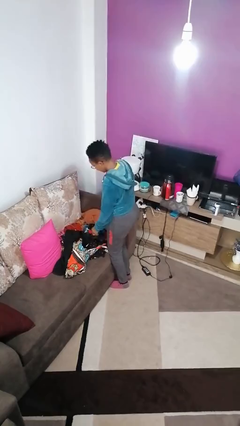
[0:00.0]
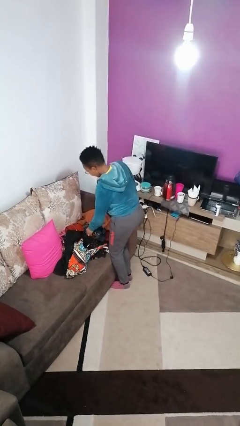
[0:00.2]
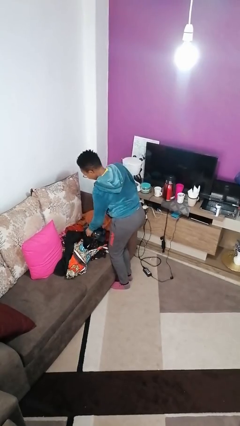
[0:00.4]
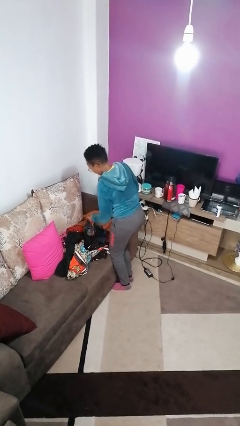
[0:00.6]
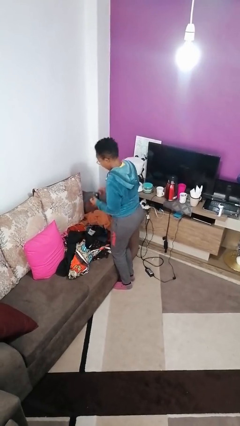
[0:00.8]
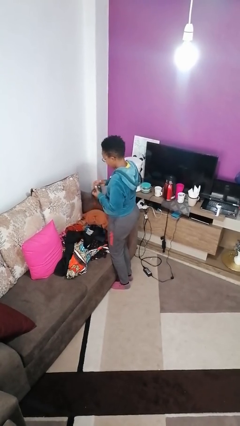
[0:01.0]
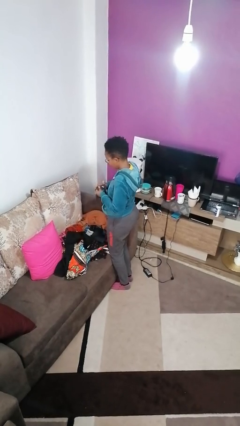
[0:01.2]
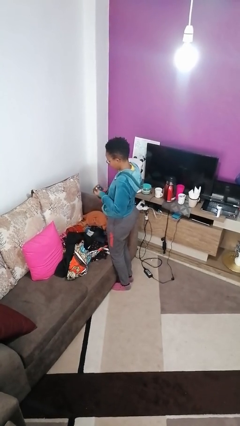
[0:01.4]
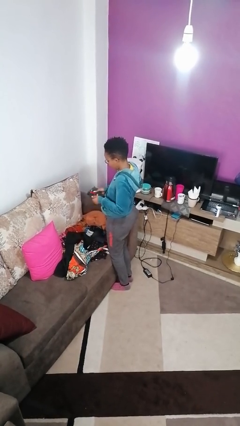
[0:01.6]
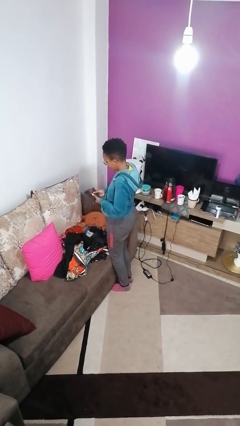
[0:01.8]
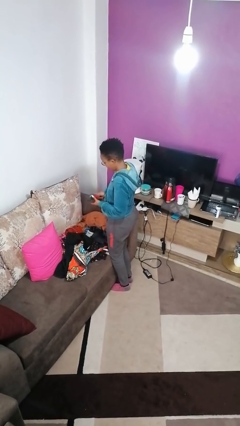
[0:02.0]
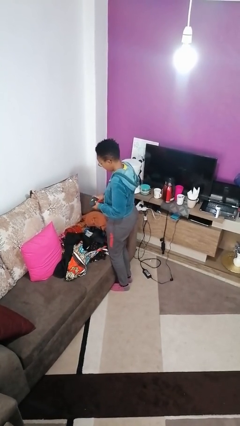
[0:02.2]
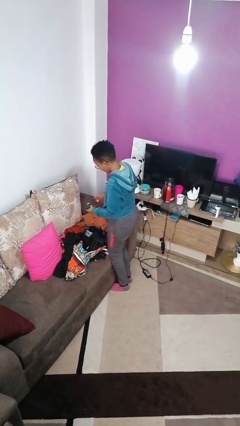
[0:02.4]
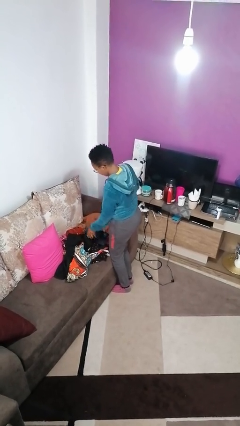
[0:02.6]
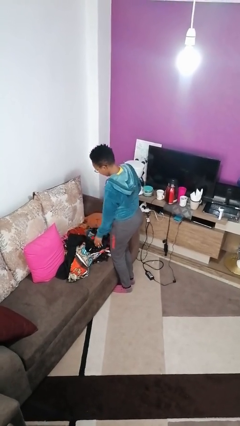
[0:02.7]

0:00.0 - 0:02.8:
person folds socks

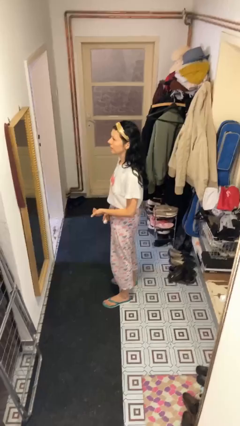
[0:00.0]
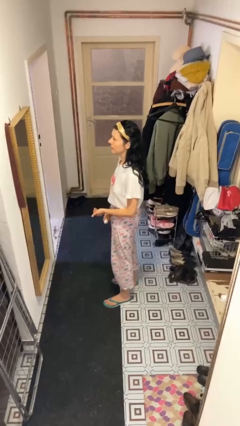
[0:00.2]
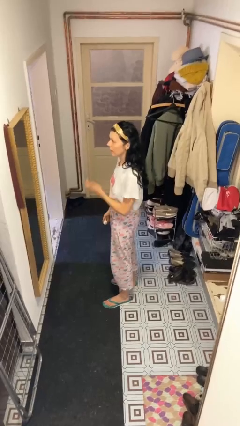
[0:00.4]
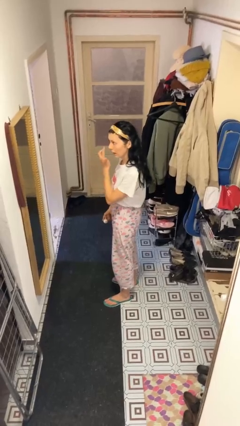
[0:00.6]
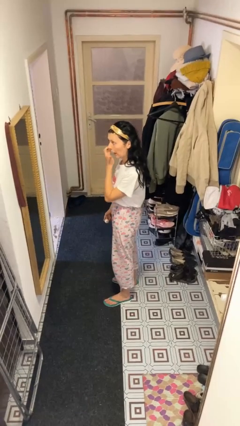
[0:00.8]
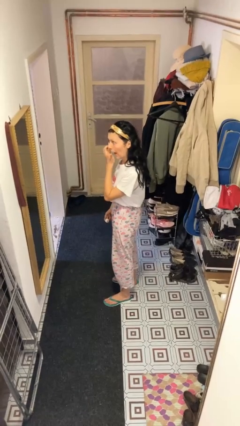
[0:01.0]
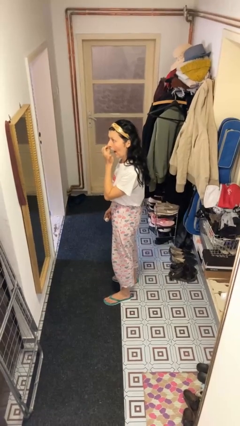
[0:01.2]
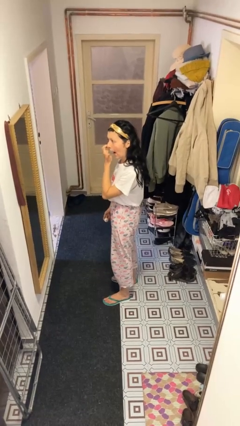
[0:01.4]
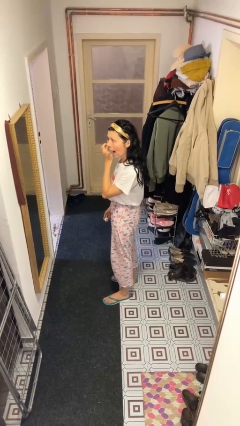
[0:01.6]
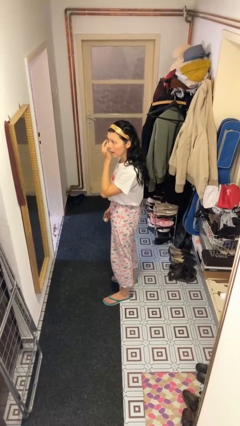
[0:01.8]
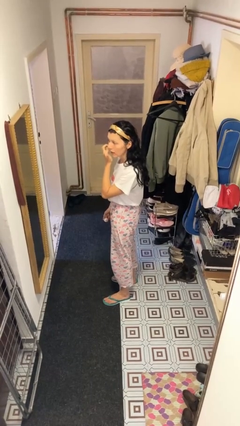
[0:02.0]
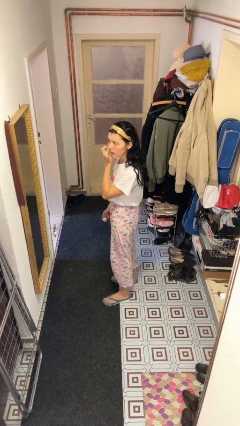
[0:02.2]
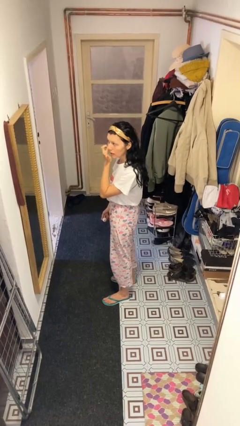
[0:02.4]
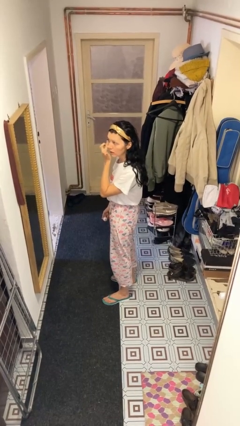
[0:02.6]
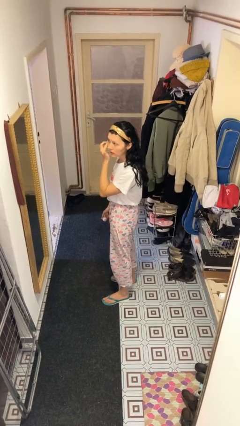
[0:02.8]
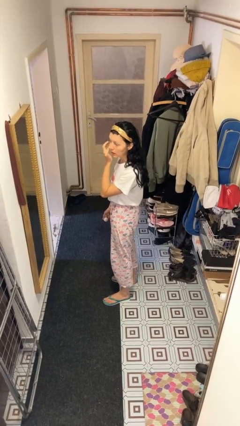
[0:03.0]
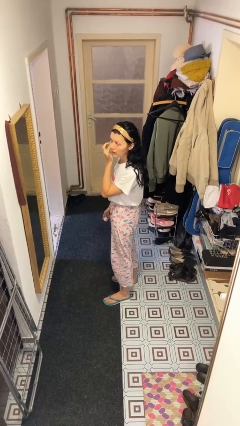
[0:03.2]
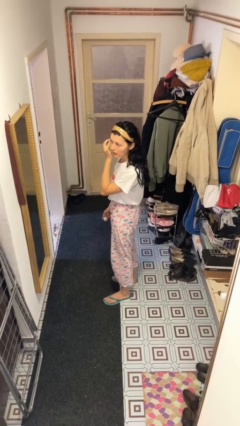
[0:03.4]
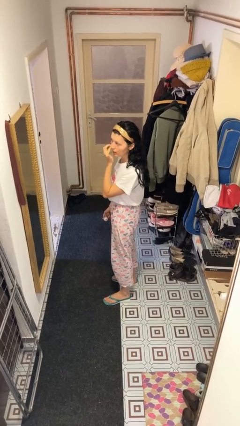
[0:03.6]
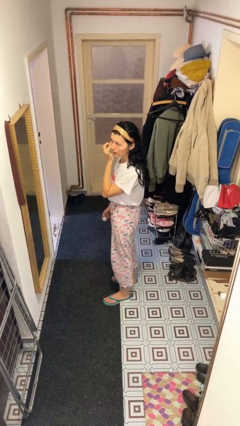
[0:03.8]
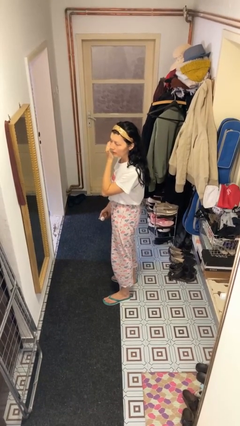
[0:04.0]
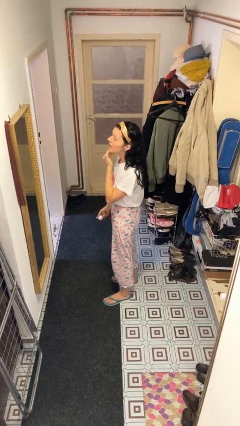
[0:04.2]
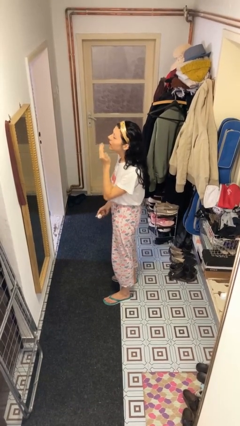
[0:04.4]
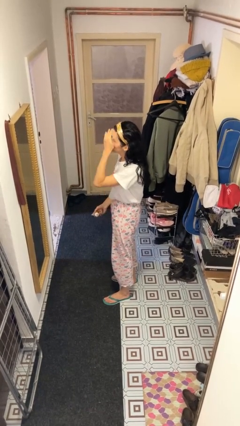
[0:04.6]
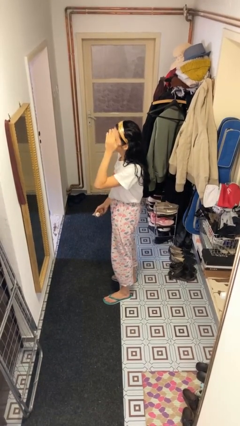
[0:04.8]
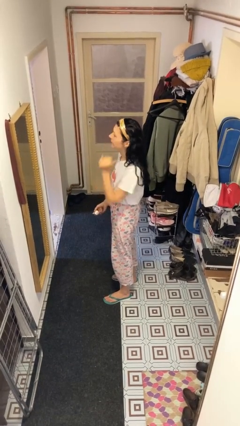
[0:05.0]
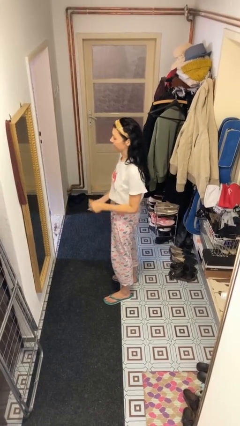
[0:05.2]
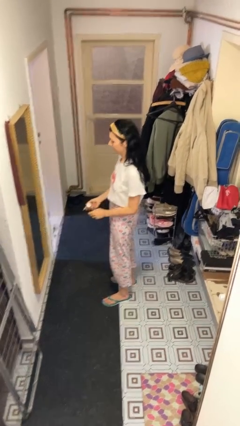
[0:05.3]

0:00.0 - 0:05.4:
person applies foundation makeup

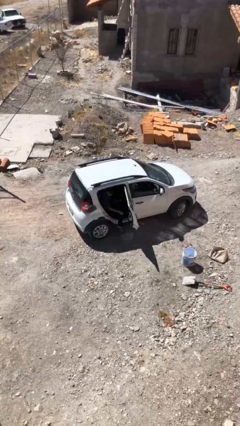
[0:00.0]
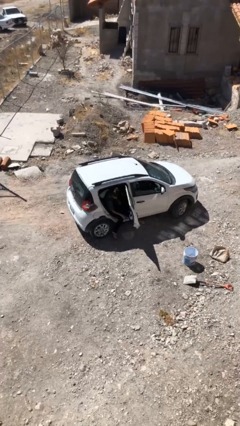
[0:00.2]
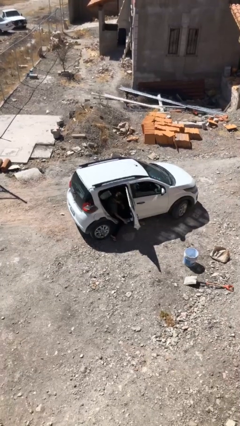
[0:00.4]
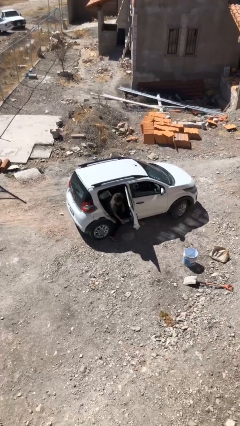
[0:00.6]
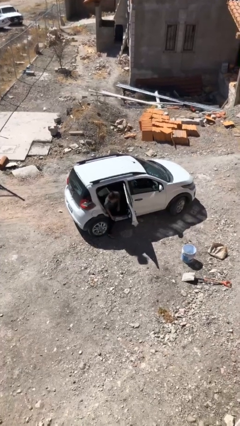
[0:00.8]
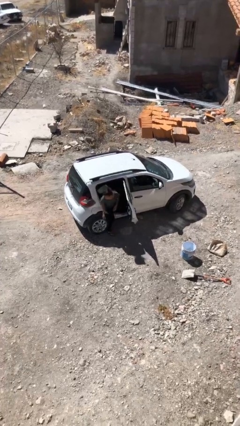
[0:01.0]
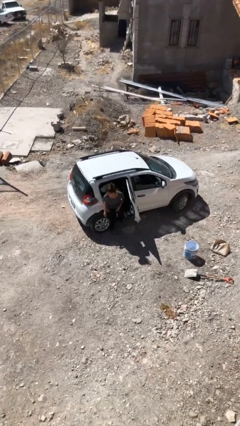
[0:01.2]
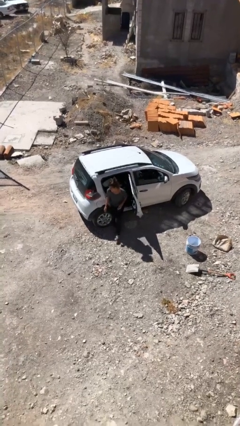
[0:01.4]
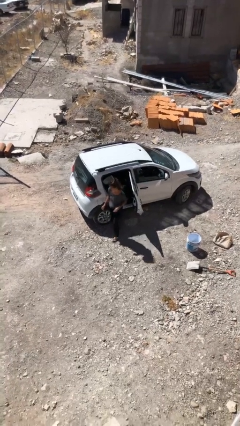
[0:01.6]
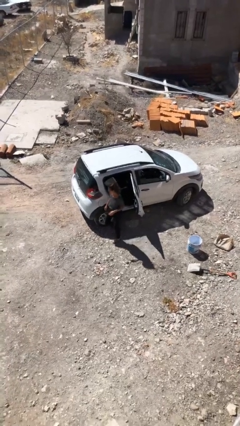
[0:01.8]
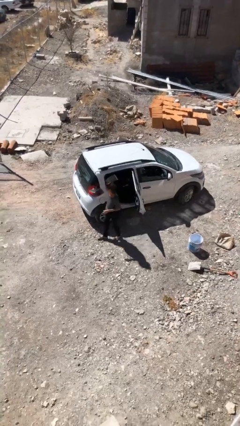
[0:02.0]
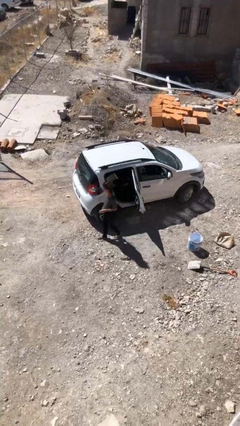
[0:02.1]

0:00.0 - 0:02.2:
person exits car

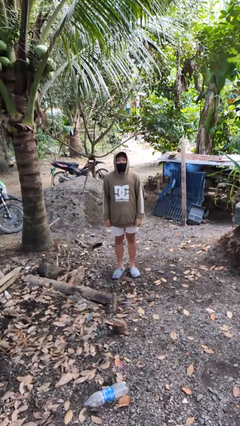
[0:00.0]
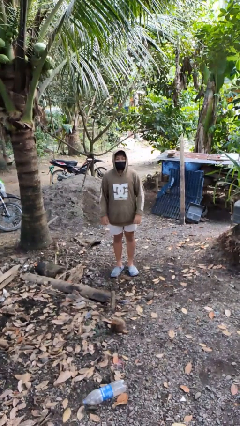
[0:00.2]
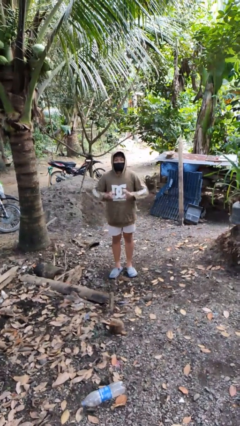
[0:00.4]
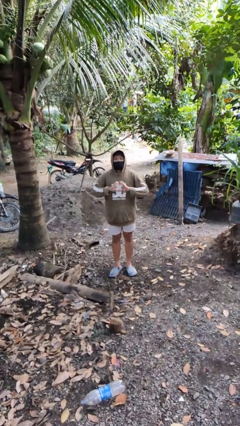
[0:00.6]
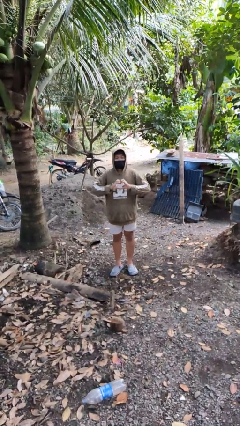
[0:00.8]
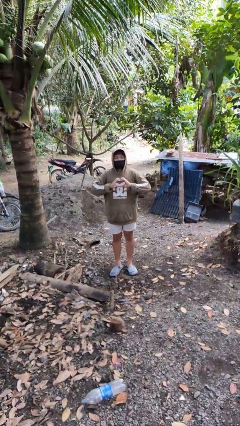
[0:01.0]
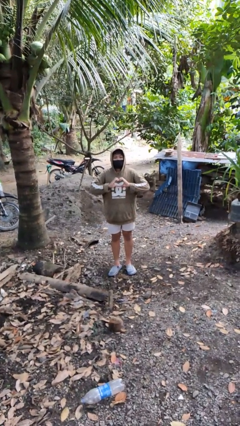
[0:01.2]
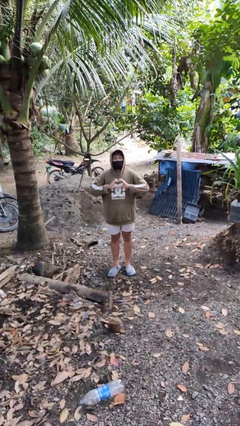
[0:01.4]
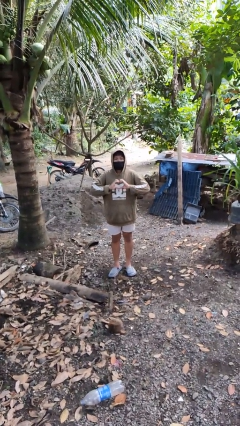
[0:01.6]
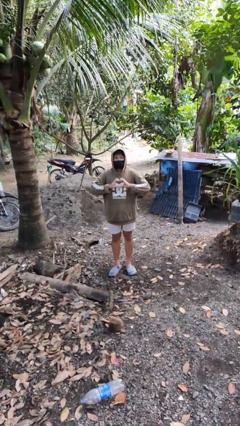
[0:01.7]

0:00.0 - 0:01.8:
person gestures heart

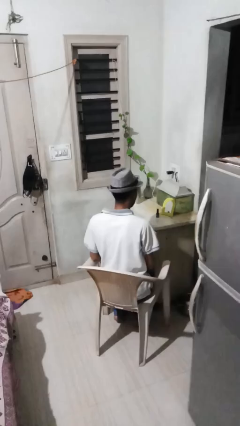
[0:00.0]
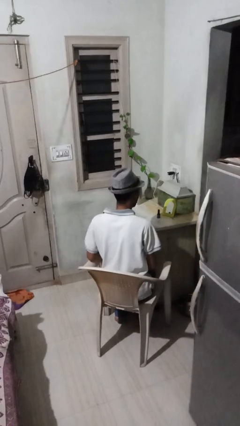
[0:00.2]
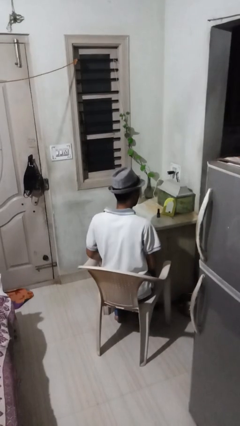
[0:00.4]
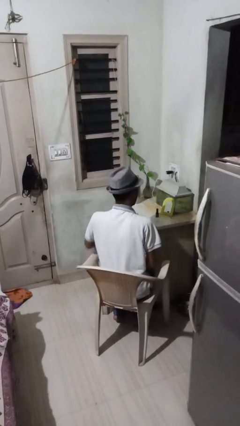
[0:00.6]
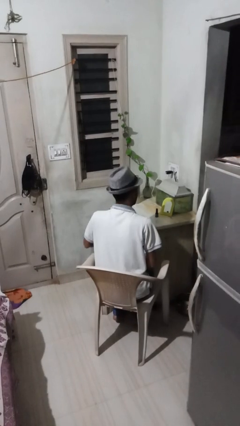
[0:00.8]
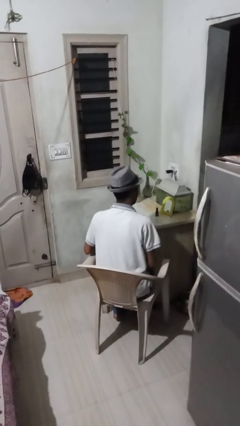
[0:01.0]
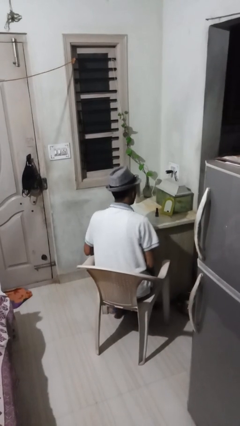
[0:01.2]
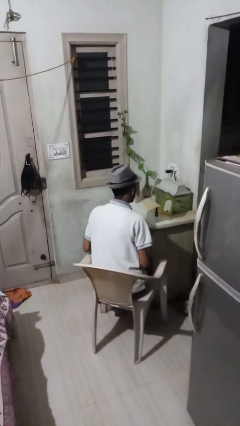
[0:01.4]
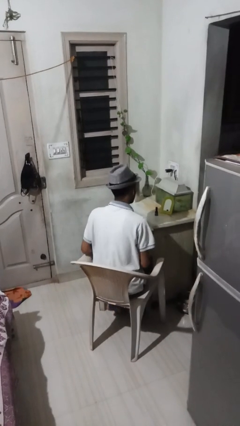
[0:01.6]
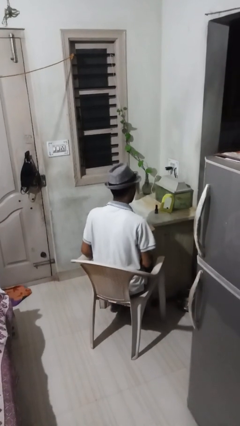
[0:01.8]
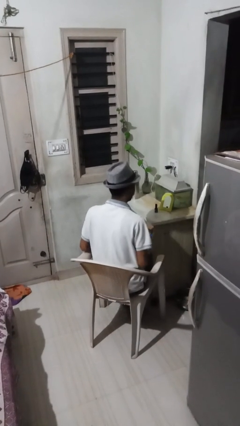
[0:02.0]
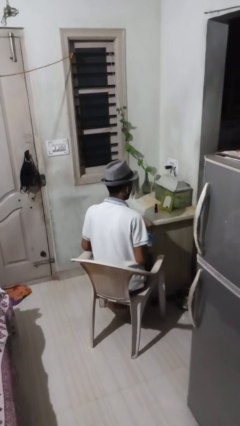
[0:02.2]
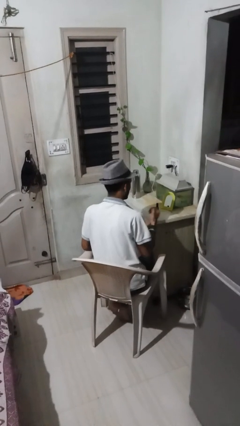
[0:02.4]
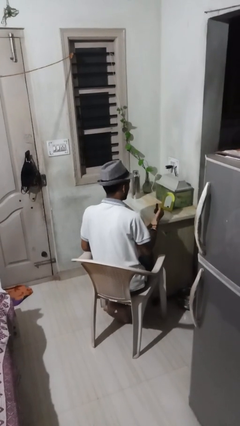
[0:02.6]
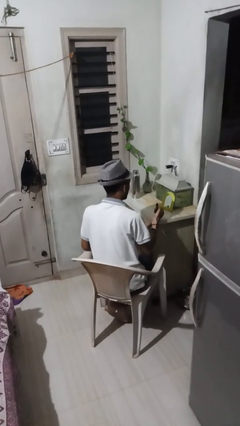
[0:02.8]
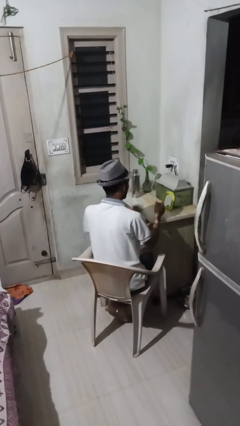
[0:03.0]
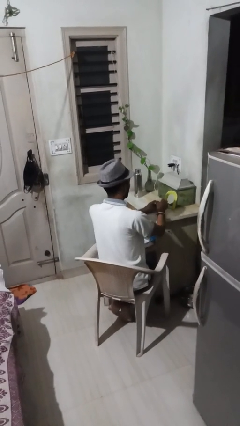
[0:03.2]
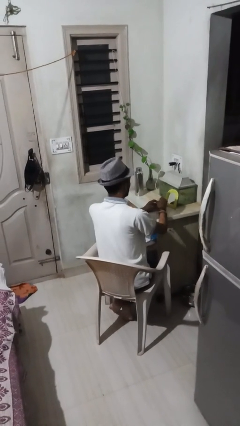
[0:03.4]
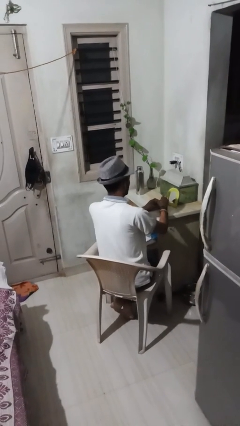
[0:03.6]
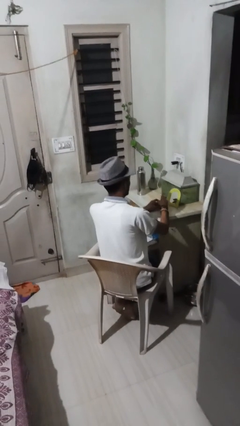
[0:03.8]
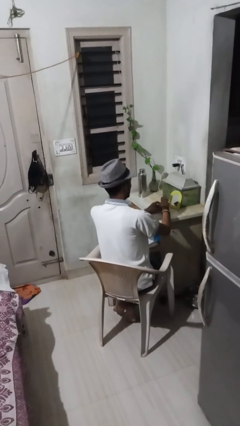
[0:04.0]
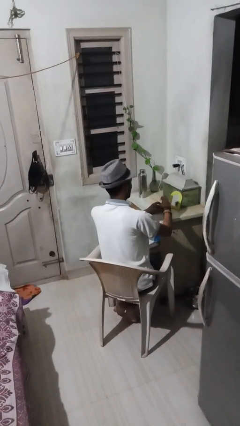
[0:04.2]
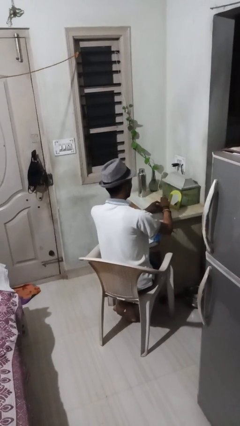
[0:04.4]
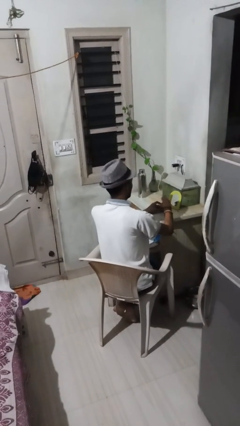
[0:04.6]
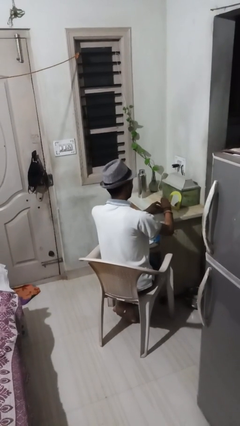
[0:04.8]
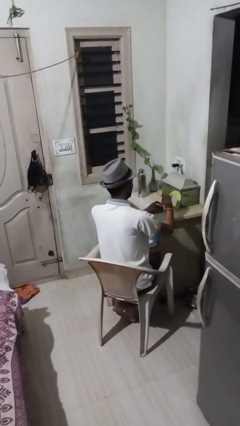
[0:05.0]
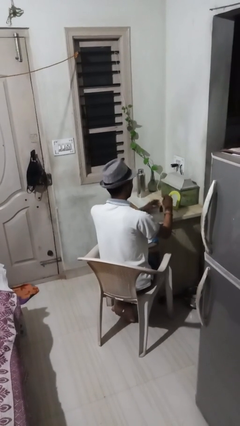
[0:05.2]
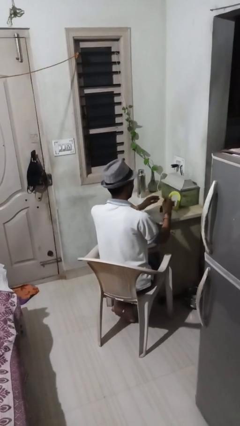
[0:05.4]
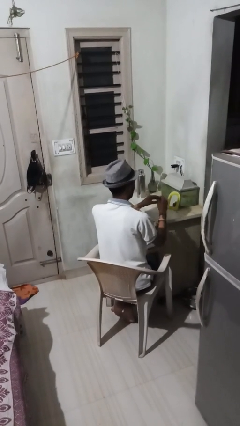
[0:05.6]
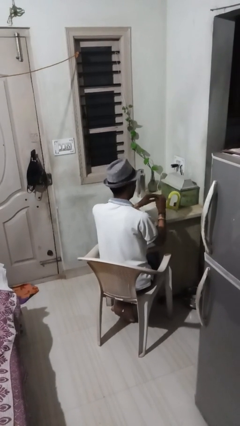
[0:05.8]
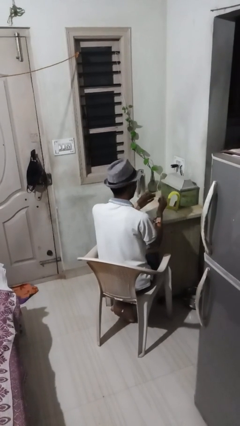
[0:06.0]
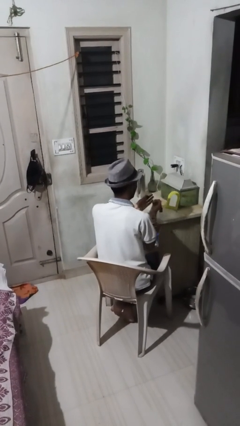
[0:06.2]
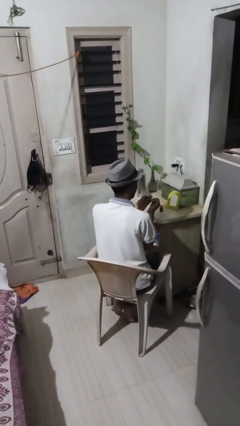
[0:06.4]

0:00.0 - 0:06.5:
person paints fingernails
